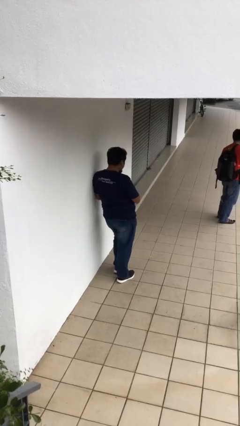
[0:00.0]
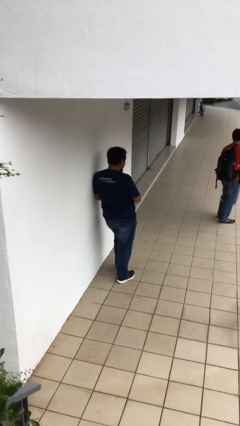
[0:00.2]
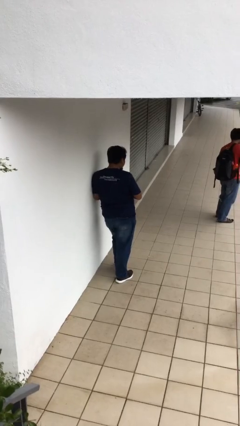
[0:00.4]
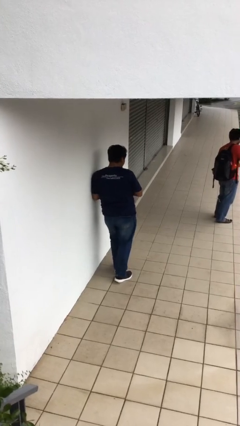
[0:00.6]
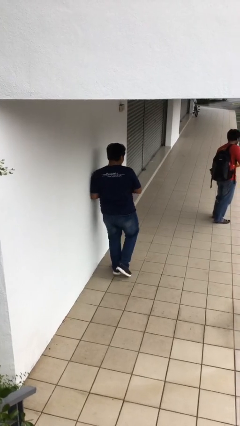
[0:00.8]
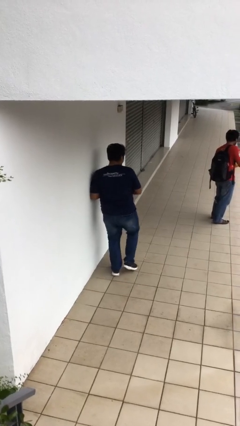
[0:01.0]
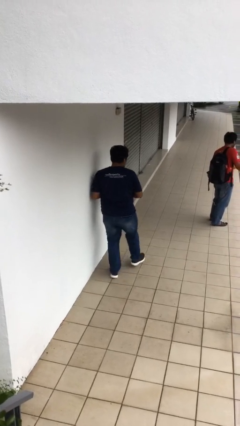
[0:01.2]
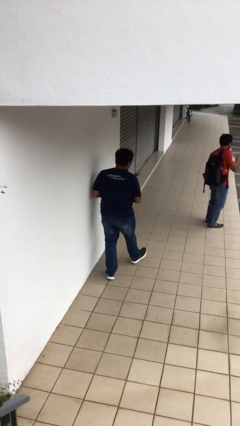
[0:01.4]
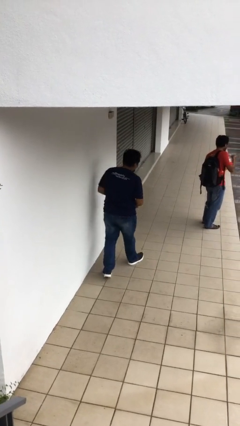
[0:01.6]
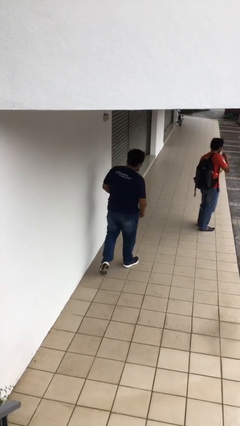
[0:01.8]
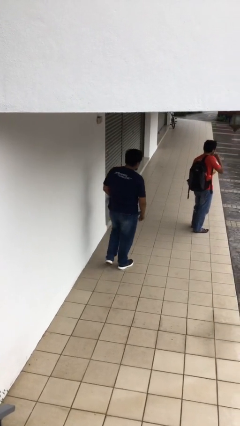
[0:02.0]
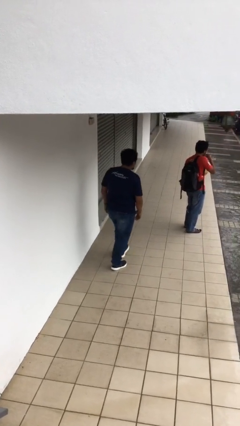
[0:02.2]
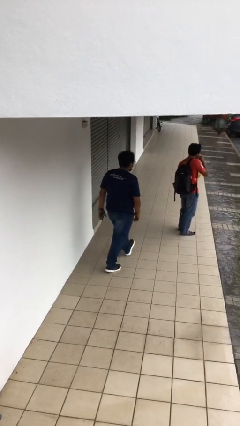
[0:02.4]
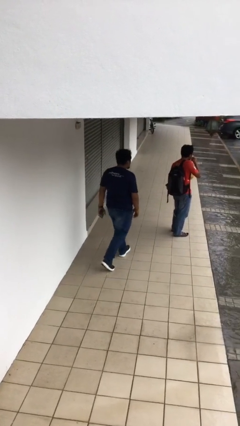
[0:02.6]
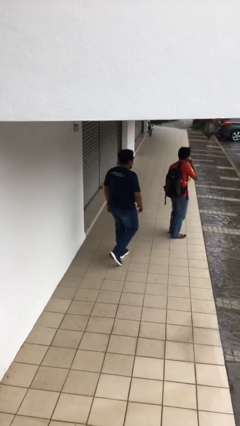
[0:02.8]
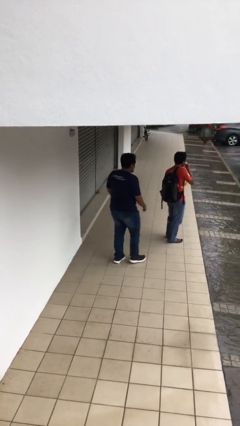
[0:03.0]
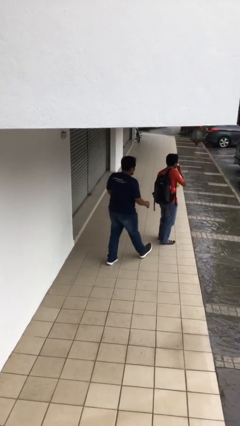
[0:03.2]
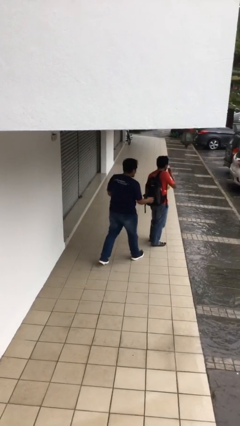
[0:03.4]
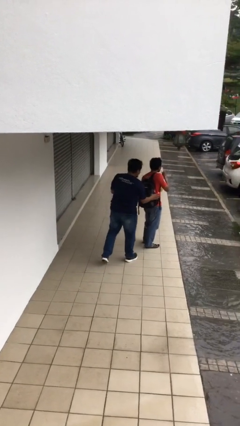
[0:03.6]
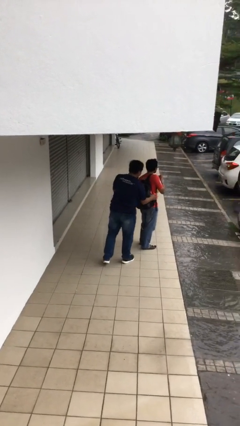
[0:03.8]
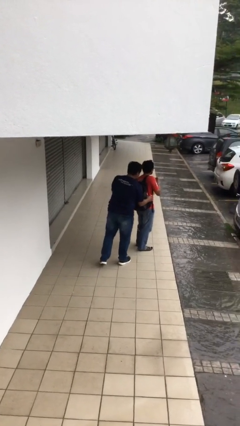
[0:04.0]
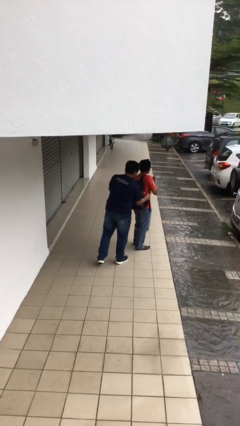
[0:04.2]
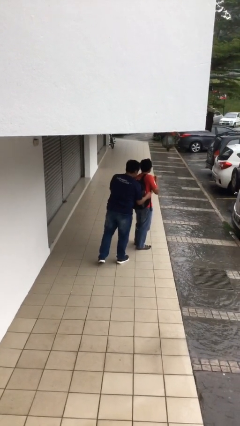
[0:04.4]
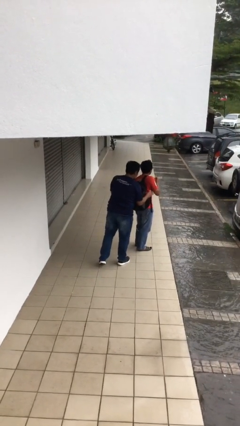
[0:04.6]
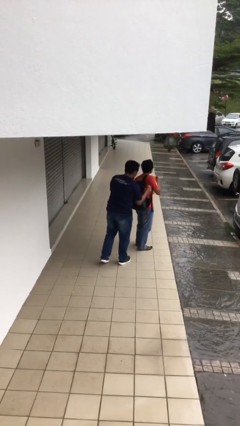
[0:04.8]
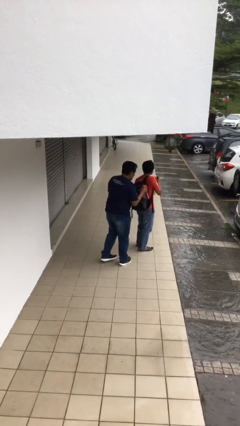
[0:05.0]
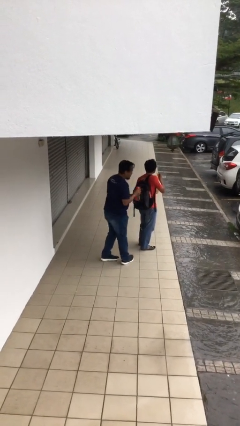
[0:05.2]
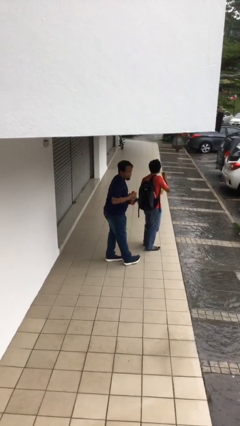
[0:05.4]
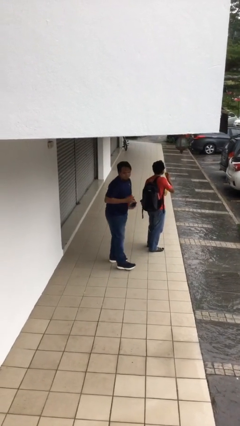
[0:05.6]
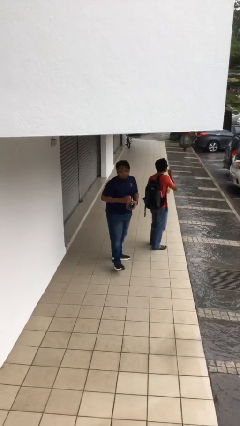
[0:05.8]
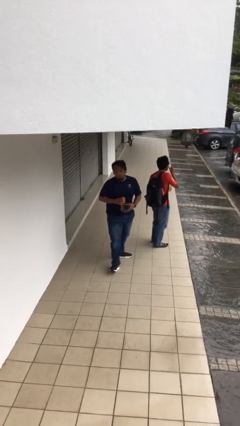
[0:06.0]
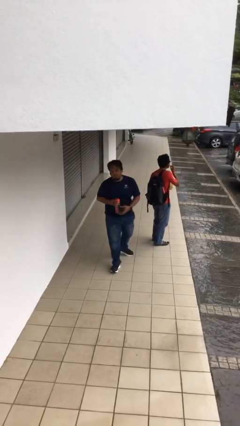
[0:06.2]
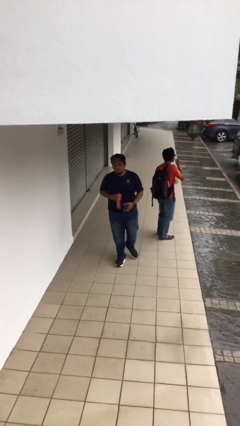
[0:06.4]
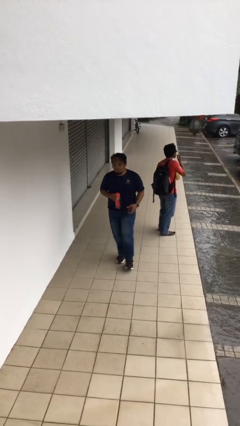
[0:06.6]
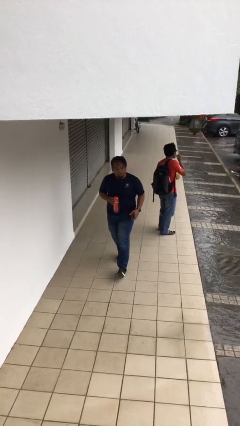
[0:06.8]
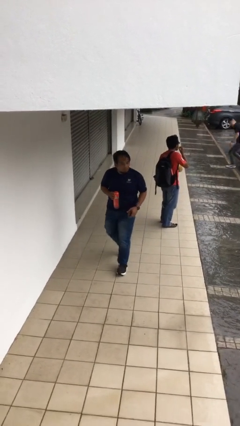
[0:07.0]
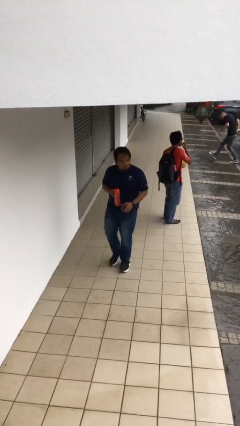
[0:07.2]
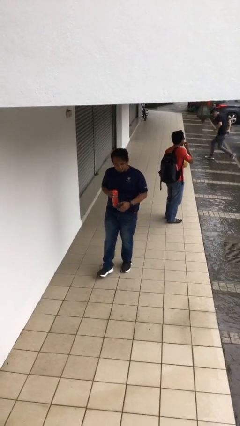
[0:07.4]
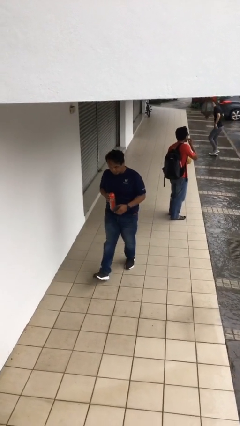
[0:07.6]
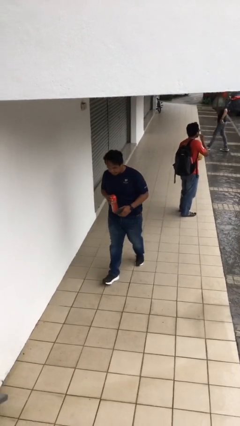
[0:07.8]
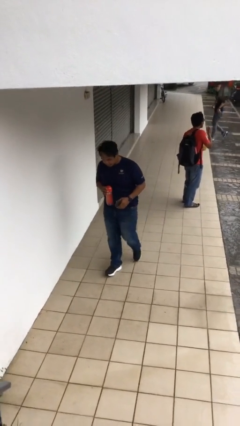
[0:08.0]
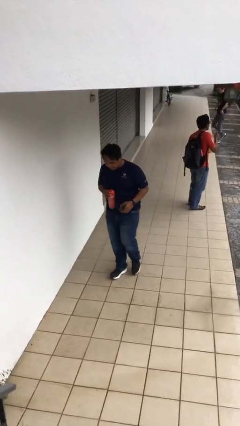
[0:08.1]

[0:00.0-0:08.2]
person steals object from person

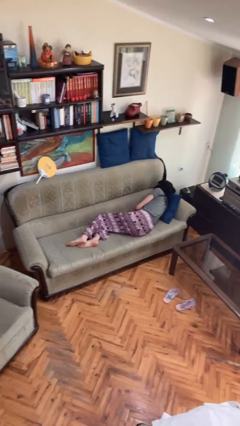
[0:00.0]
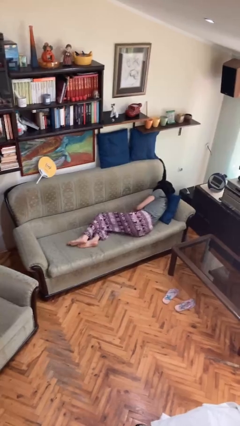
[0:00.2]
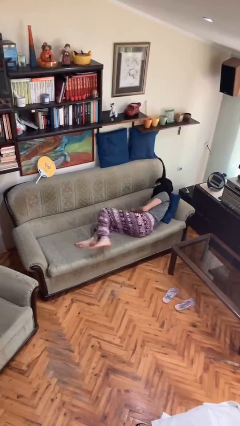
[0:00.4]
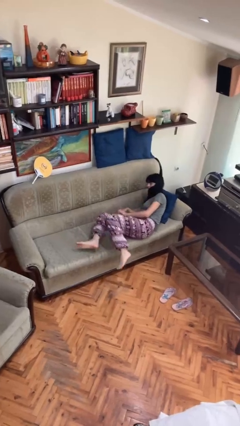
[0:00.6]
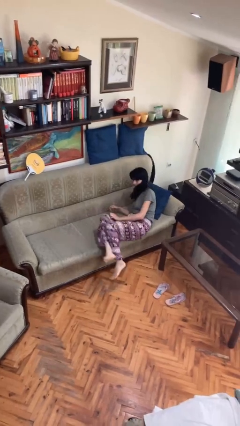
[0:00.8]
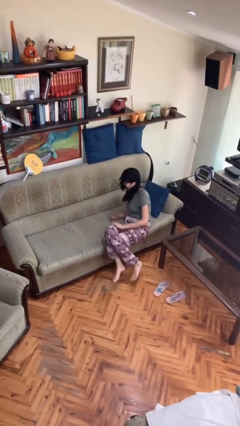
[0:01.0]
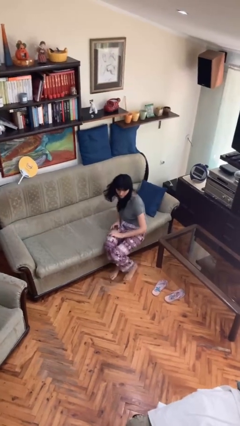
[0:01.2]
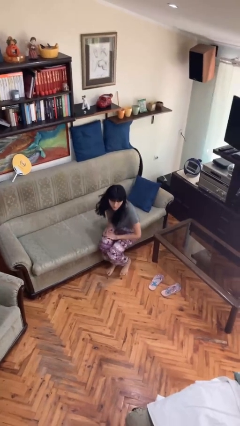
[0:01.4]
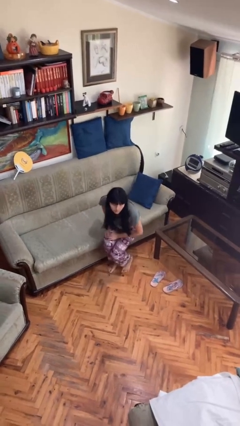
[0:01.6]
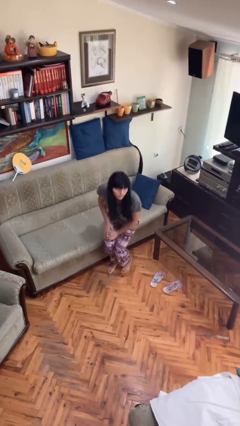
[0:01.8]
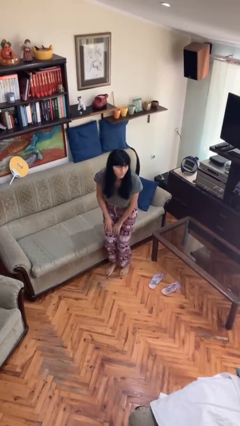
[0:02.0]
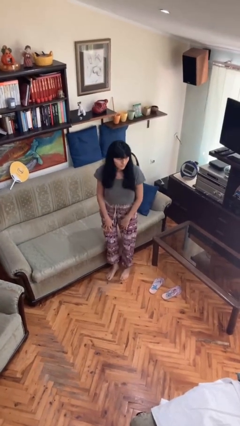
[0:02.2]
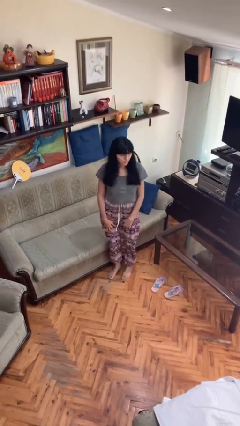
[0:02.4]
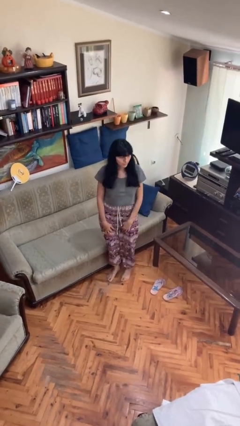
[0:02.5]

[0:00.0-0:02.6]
person stands up

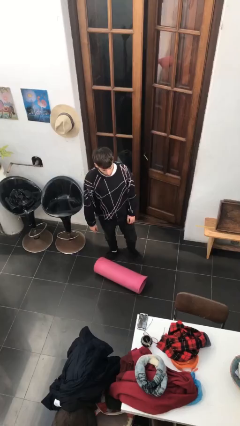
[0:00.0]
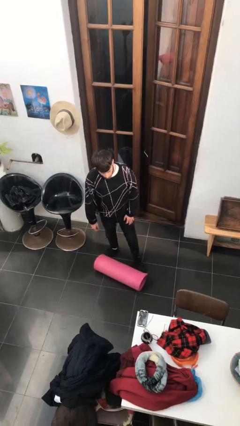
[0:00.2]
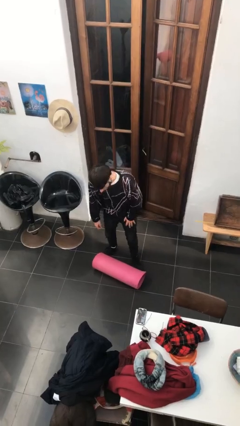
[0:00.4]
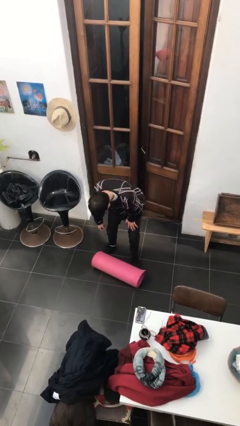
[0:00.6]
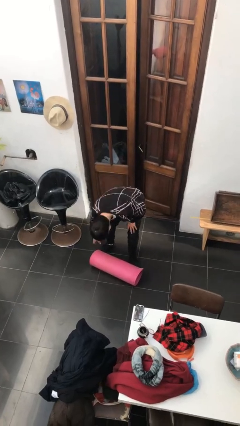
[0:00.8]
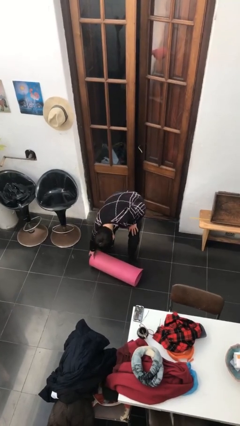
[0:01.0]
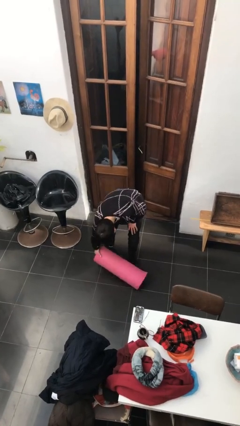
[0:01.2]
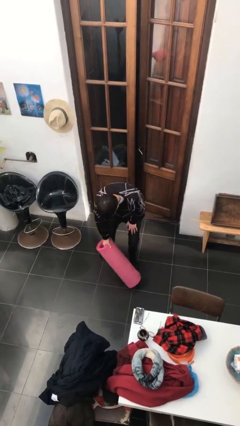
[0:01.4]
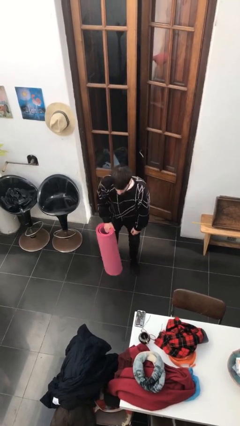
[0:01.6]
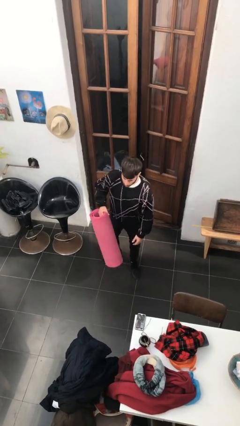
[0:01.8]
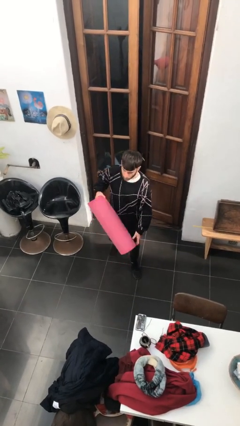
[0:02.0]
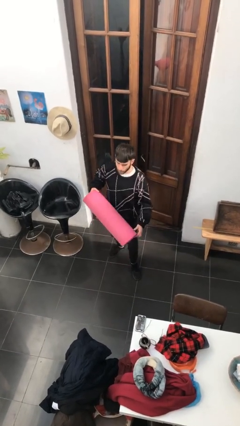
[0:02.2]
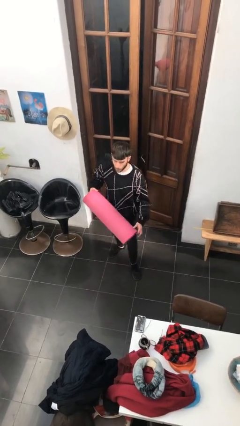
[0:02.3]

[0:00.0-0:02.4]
person picks up object from floor

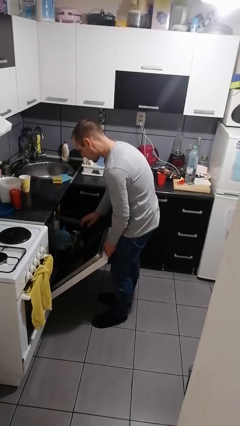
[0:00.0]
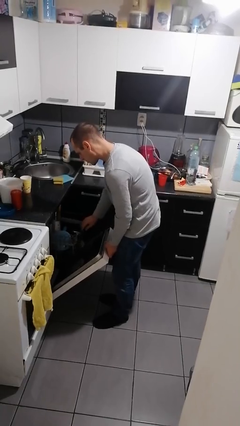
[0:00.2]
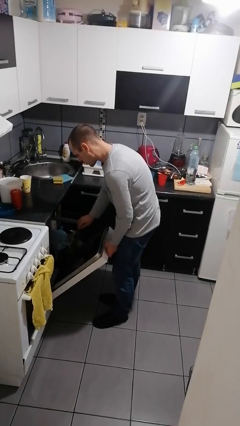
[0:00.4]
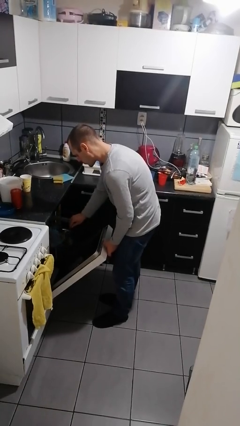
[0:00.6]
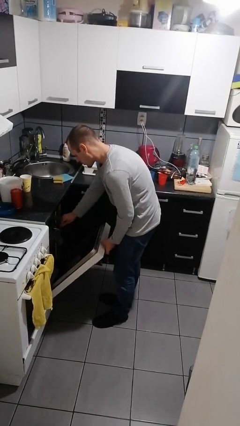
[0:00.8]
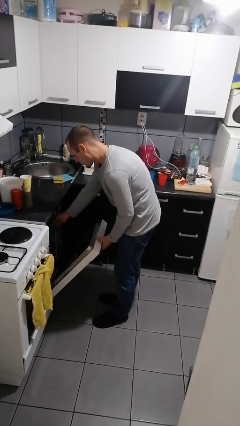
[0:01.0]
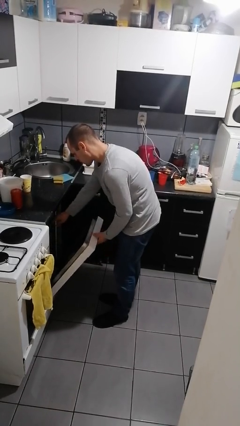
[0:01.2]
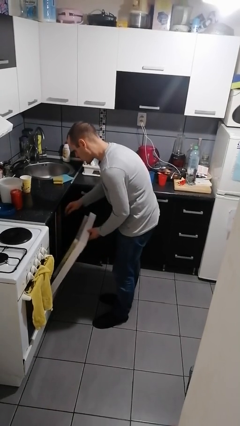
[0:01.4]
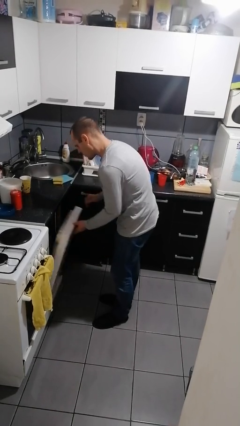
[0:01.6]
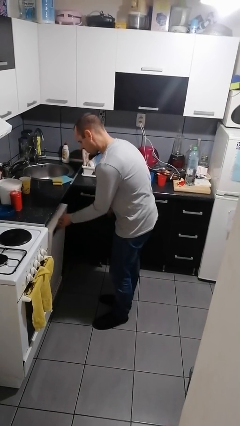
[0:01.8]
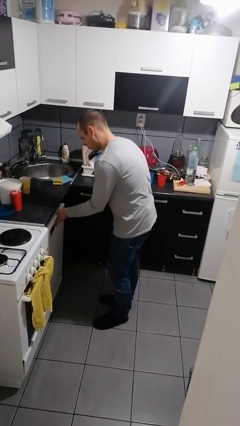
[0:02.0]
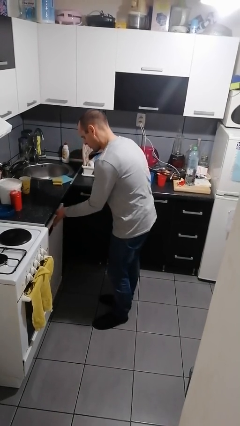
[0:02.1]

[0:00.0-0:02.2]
person closes dishwasher

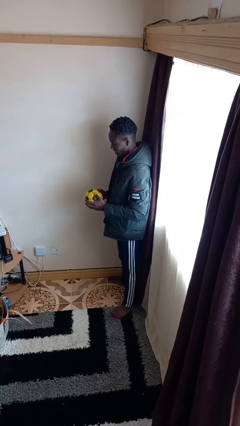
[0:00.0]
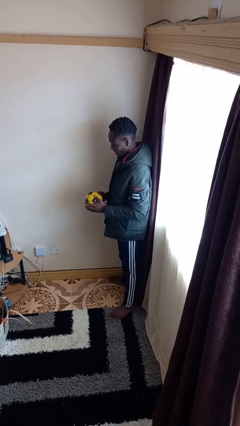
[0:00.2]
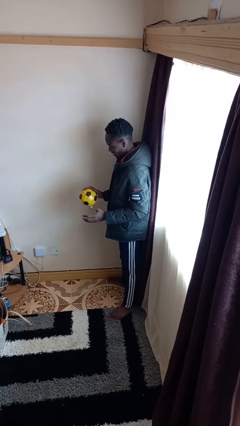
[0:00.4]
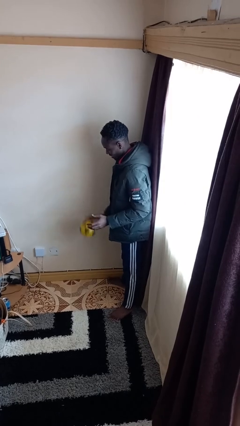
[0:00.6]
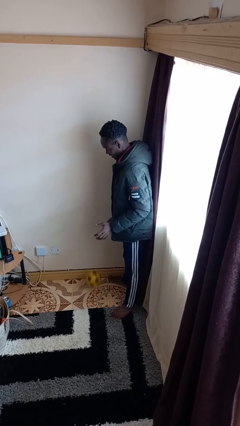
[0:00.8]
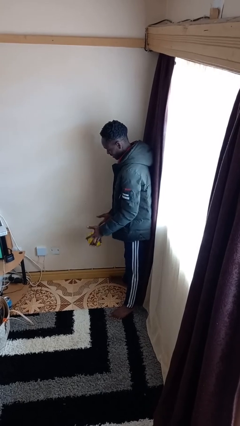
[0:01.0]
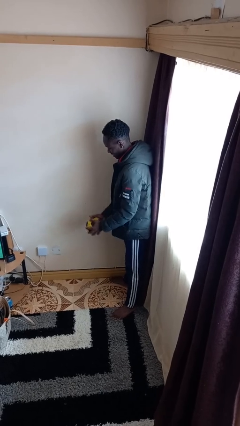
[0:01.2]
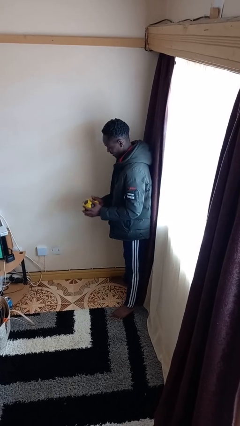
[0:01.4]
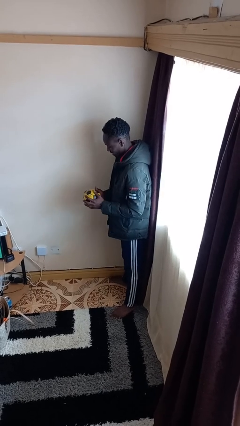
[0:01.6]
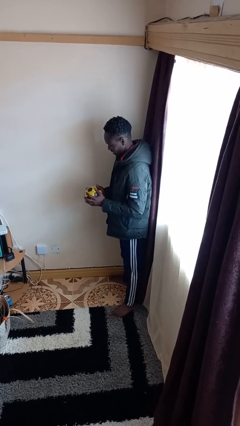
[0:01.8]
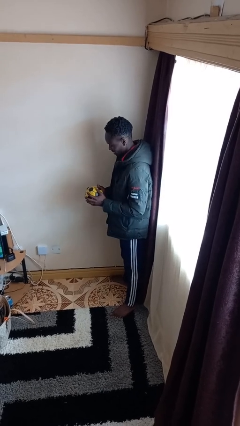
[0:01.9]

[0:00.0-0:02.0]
person bounces ball on floor

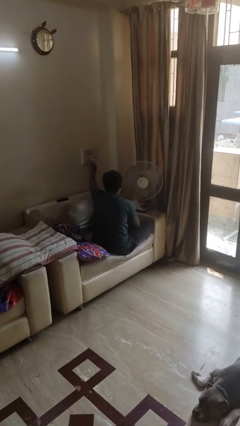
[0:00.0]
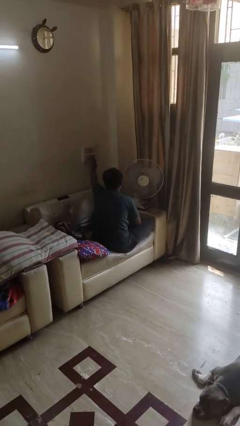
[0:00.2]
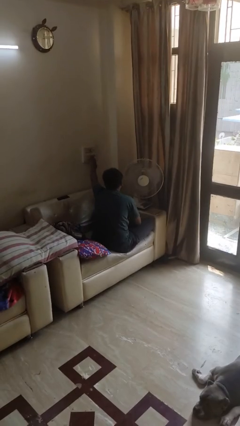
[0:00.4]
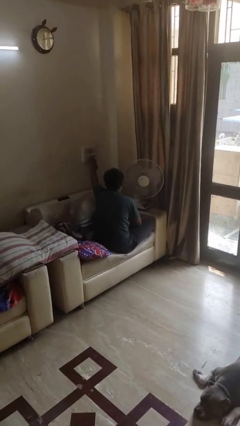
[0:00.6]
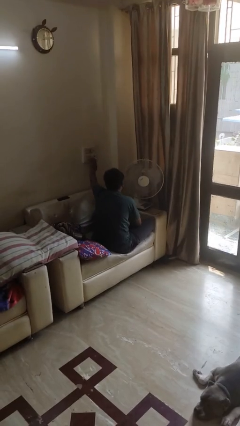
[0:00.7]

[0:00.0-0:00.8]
person turns off fan
